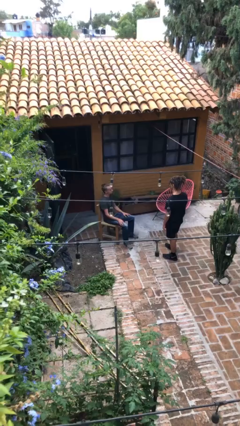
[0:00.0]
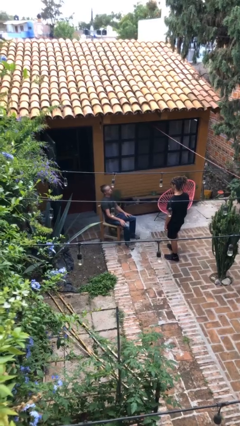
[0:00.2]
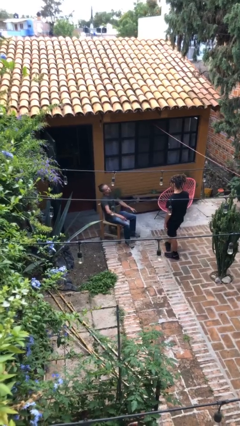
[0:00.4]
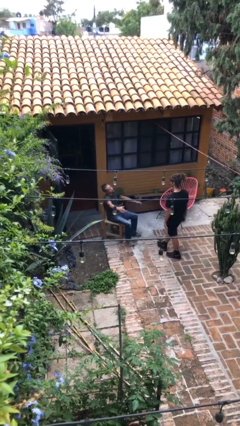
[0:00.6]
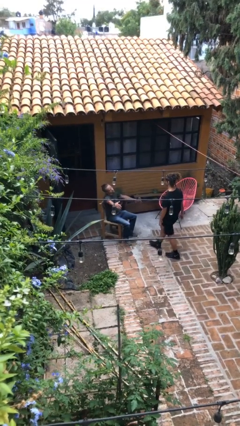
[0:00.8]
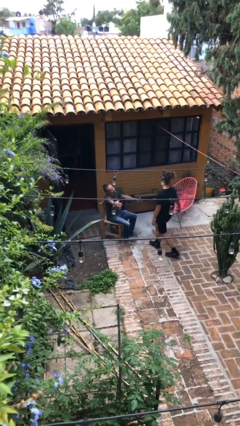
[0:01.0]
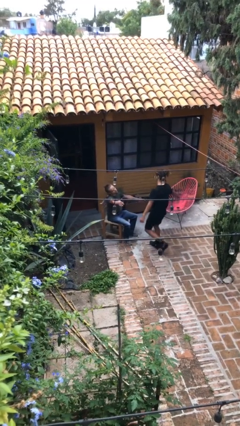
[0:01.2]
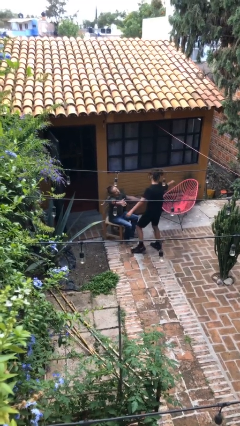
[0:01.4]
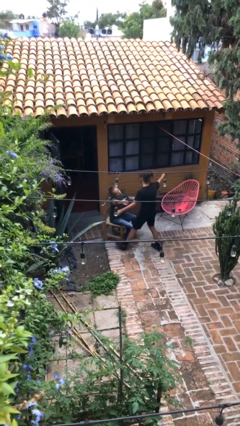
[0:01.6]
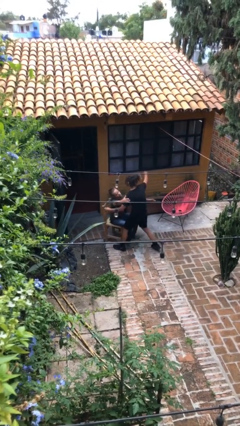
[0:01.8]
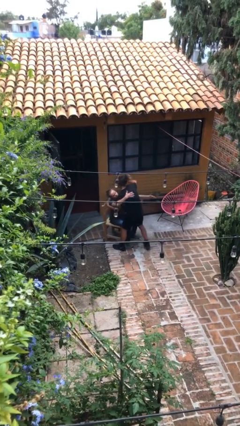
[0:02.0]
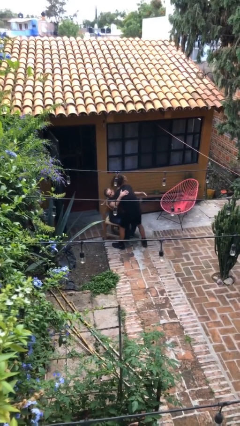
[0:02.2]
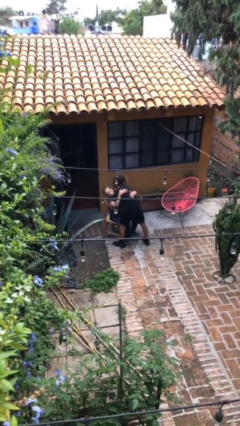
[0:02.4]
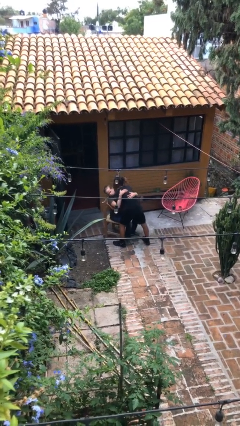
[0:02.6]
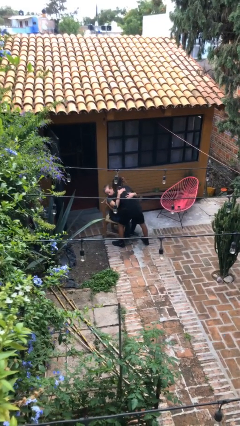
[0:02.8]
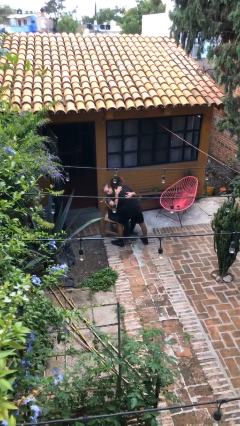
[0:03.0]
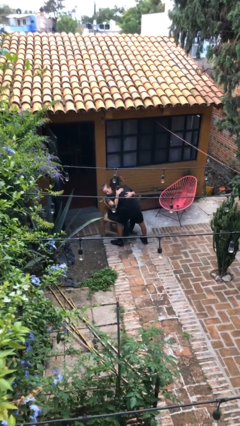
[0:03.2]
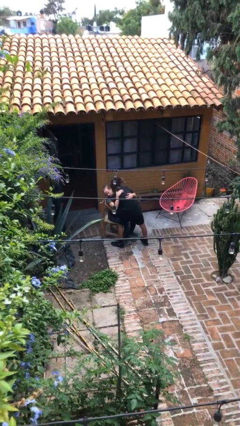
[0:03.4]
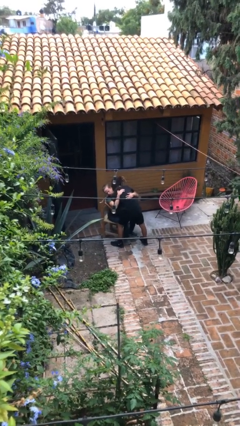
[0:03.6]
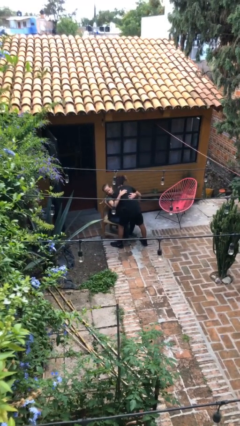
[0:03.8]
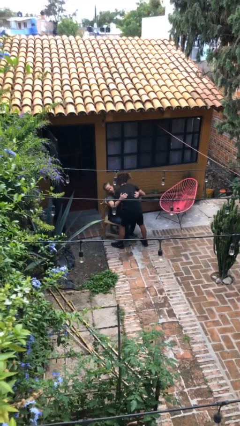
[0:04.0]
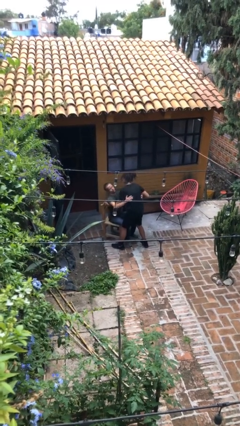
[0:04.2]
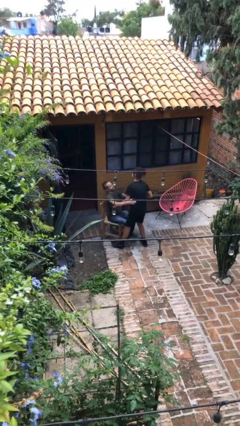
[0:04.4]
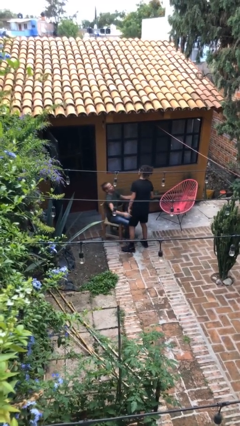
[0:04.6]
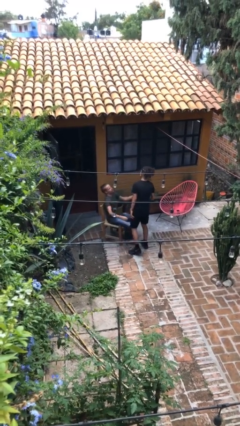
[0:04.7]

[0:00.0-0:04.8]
person embraces person

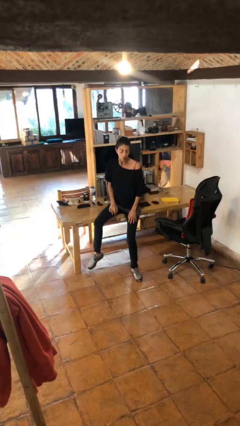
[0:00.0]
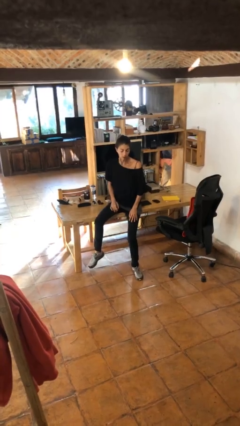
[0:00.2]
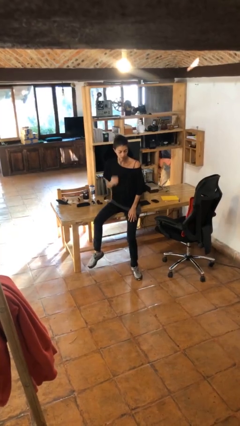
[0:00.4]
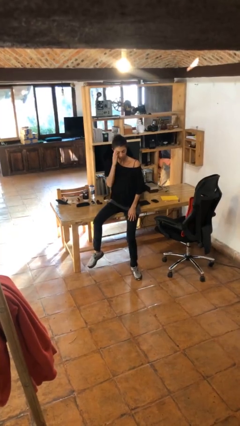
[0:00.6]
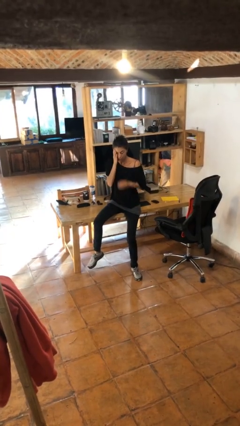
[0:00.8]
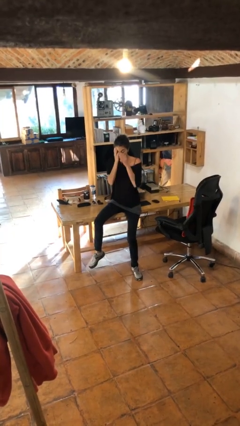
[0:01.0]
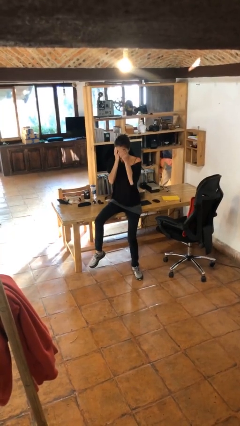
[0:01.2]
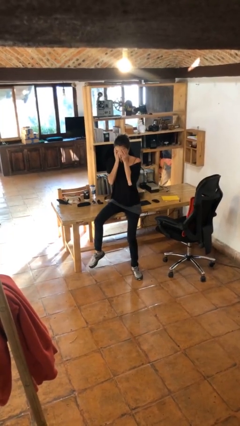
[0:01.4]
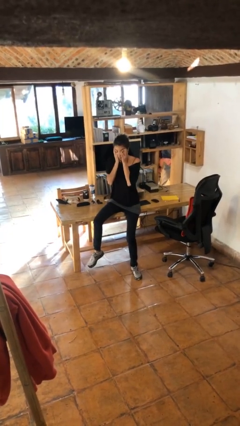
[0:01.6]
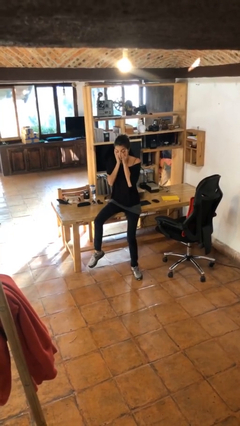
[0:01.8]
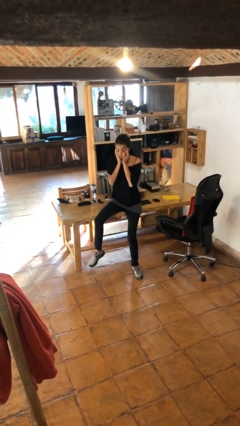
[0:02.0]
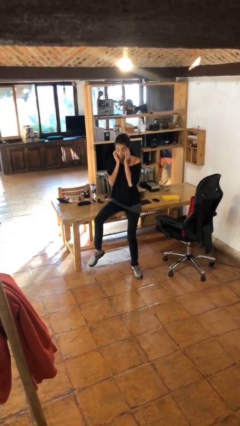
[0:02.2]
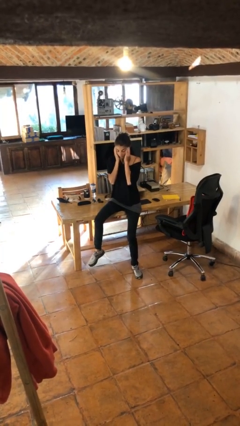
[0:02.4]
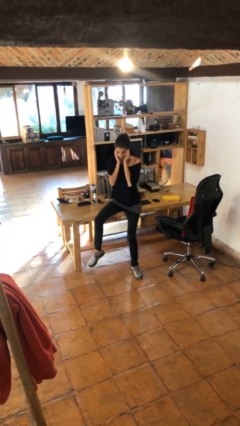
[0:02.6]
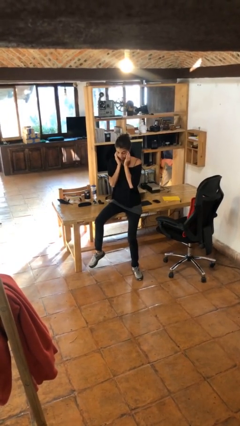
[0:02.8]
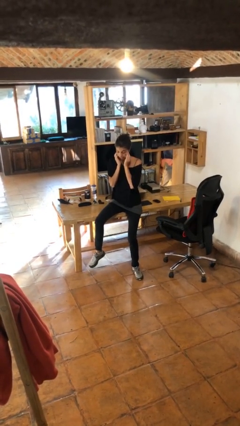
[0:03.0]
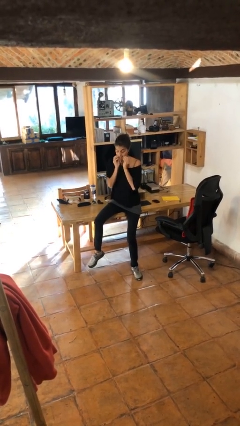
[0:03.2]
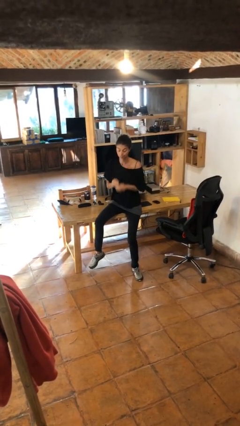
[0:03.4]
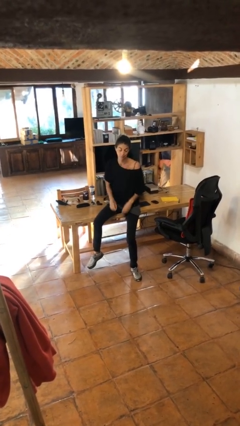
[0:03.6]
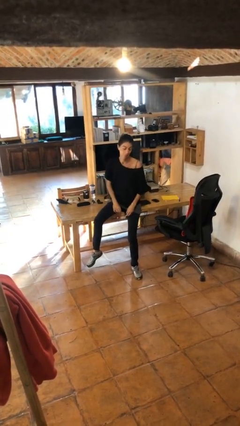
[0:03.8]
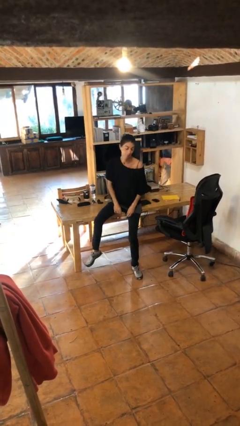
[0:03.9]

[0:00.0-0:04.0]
person scratches face

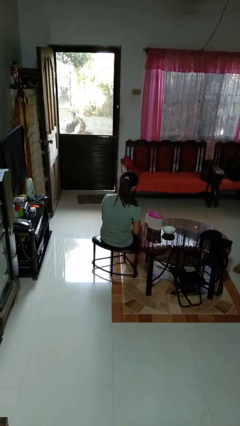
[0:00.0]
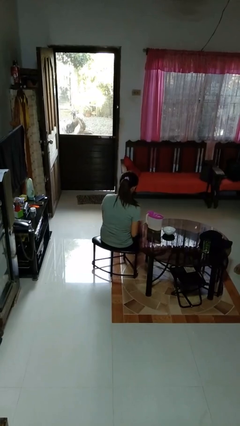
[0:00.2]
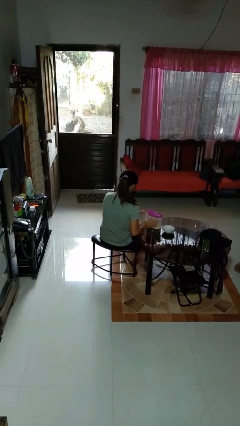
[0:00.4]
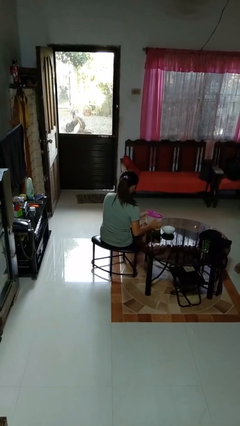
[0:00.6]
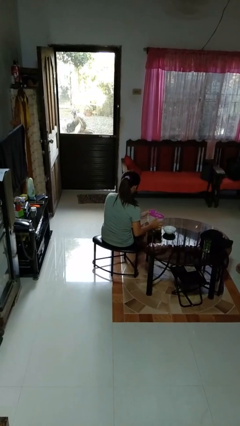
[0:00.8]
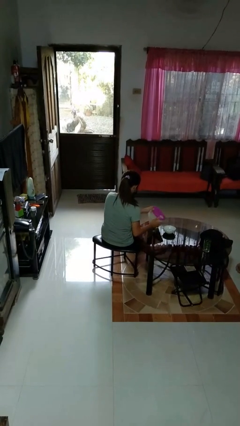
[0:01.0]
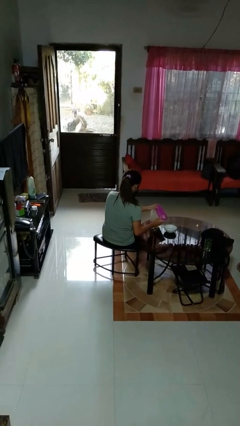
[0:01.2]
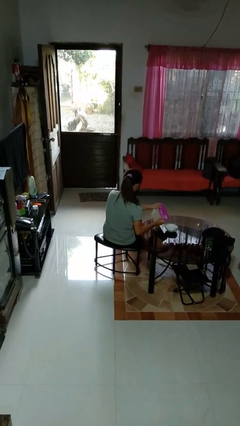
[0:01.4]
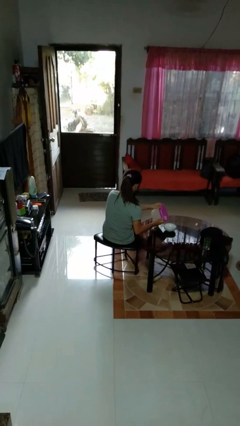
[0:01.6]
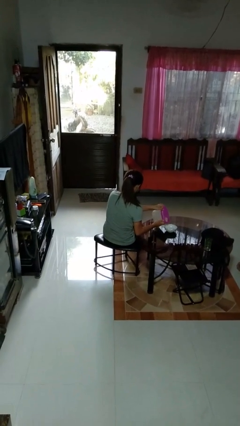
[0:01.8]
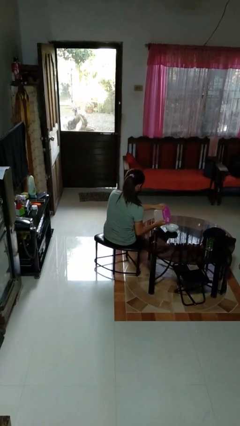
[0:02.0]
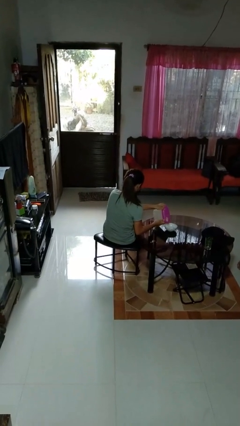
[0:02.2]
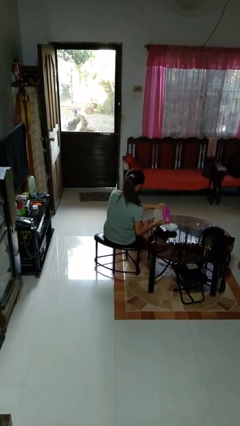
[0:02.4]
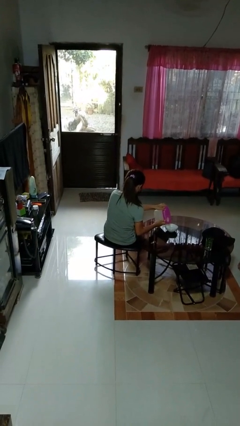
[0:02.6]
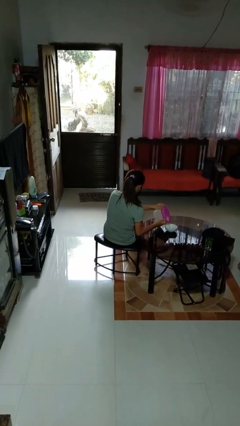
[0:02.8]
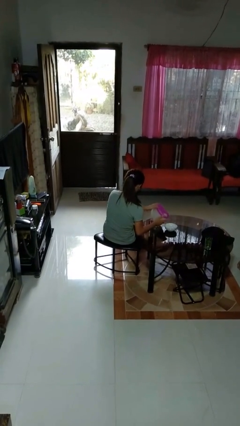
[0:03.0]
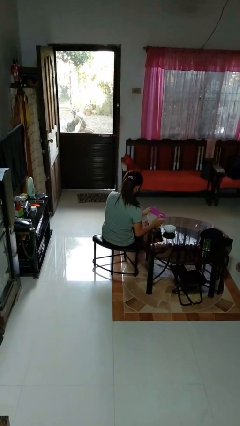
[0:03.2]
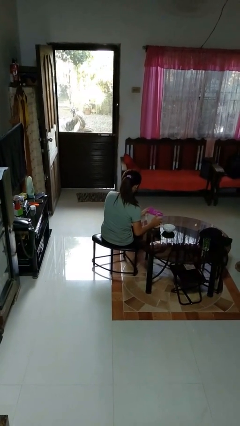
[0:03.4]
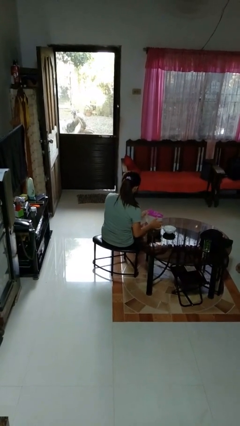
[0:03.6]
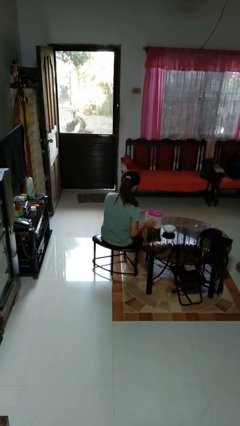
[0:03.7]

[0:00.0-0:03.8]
person pours into bowl

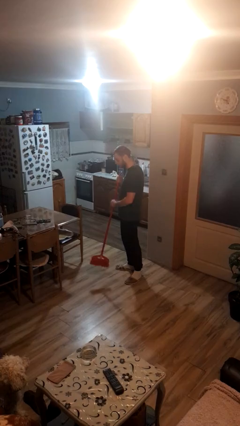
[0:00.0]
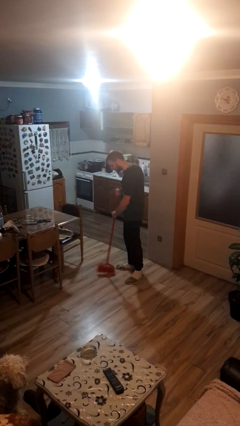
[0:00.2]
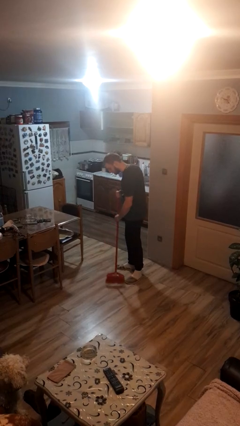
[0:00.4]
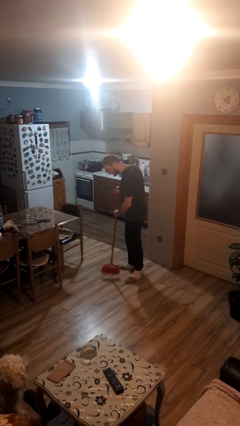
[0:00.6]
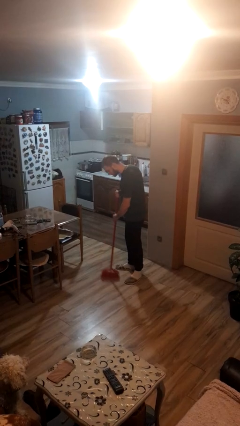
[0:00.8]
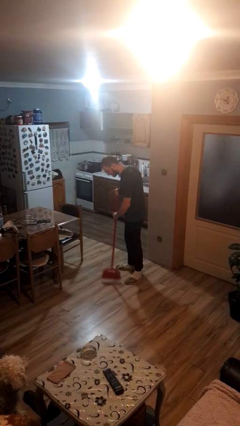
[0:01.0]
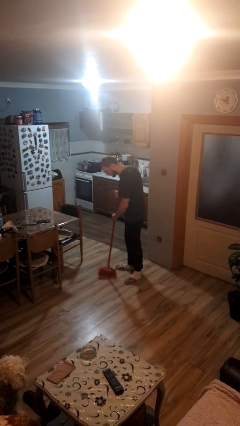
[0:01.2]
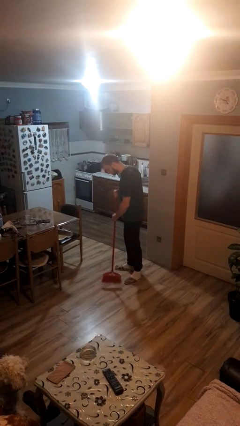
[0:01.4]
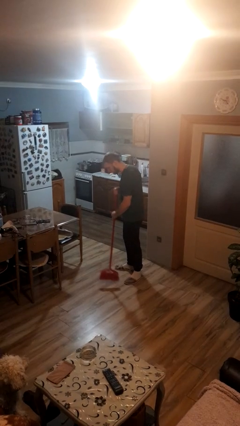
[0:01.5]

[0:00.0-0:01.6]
person sweeps floor

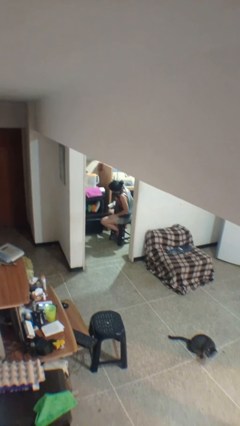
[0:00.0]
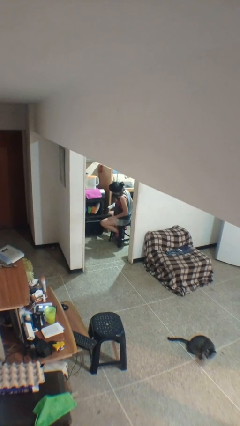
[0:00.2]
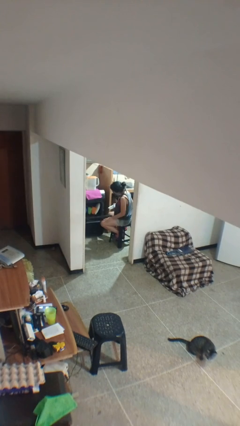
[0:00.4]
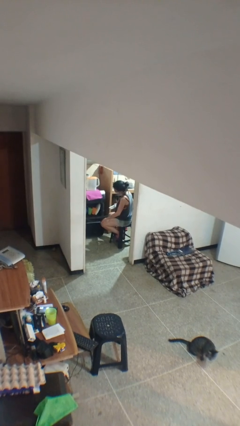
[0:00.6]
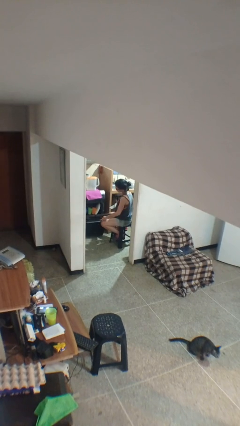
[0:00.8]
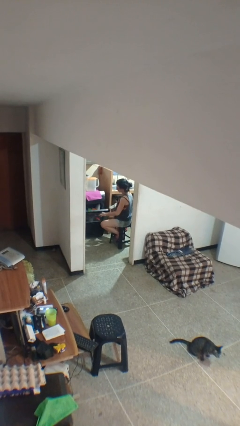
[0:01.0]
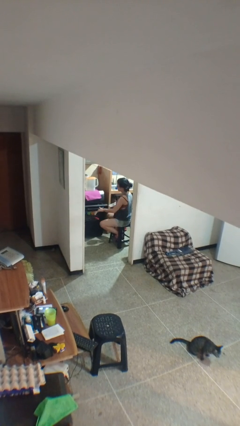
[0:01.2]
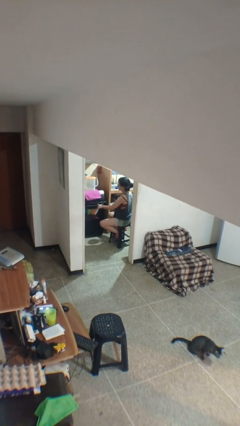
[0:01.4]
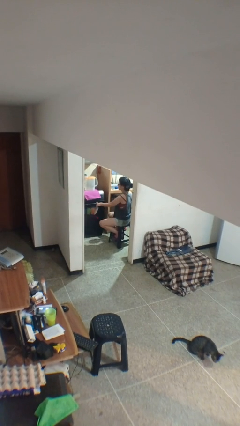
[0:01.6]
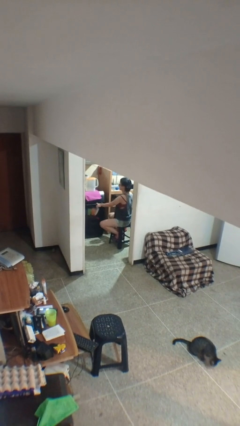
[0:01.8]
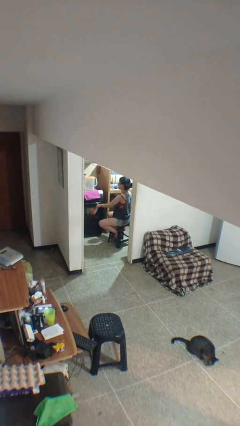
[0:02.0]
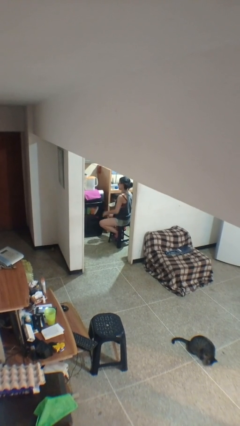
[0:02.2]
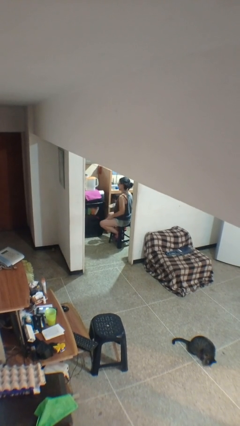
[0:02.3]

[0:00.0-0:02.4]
person closes dishwasher

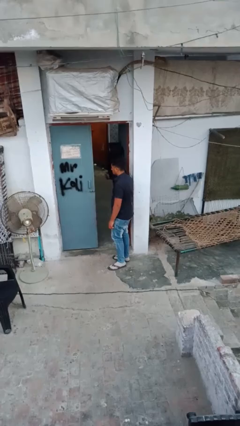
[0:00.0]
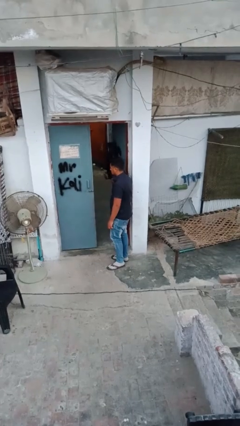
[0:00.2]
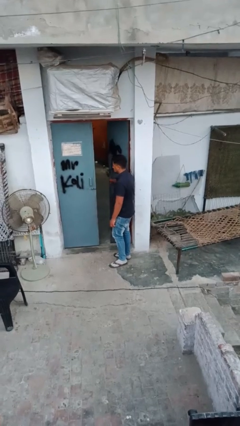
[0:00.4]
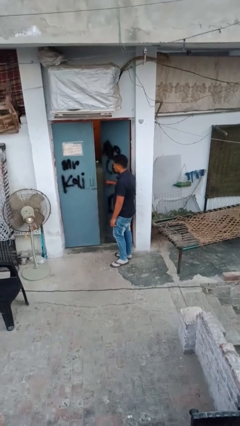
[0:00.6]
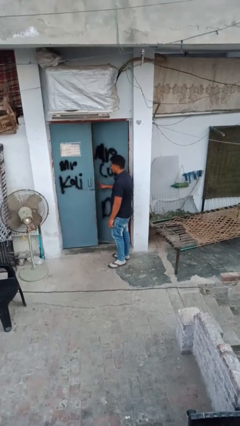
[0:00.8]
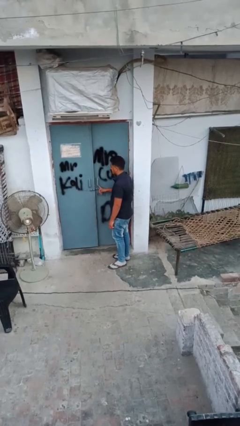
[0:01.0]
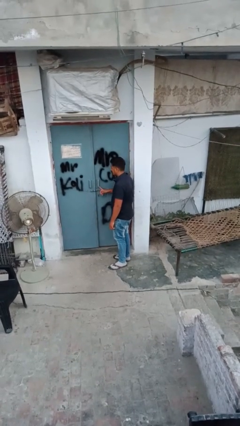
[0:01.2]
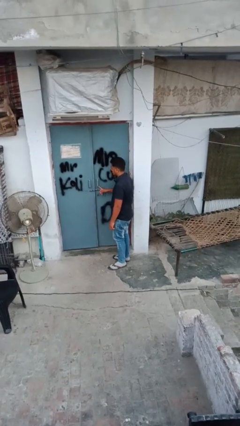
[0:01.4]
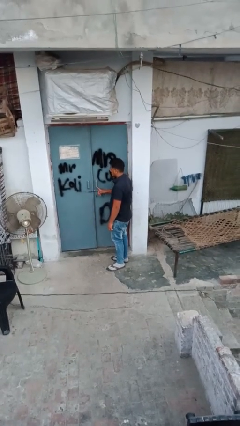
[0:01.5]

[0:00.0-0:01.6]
person closes facility door
